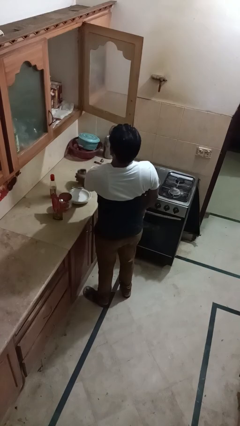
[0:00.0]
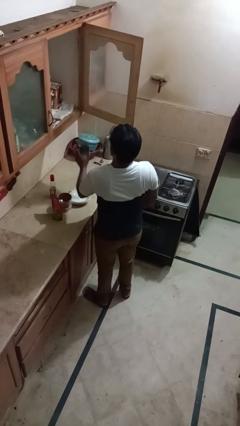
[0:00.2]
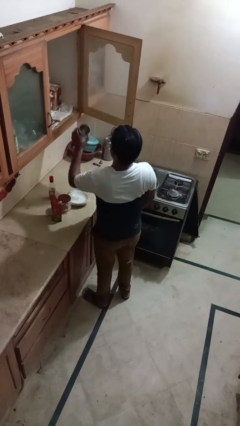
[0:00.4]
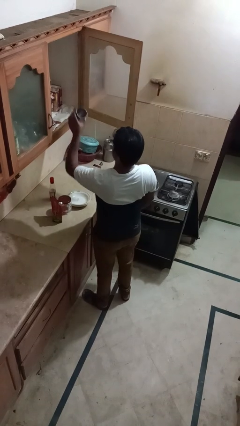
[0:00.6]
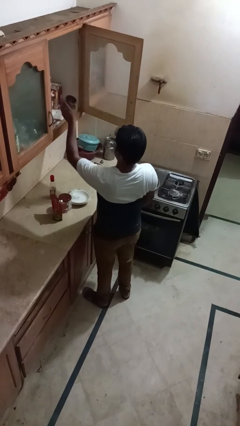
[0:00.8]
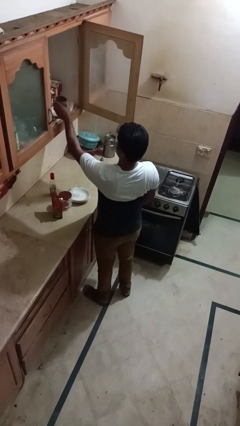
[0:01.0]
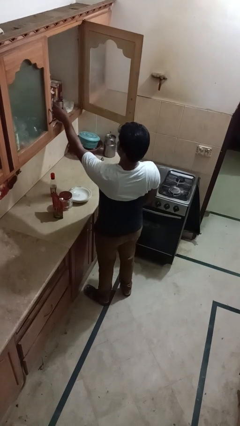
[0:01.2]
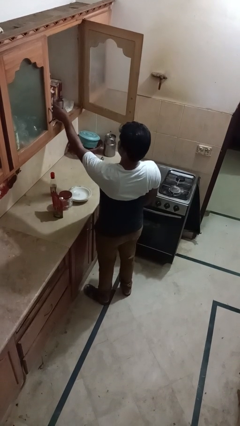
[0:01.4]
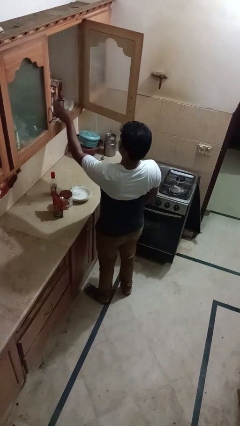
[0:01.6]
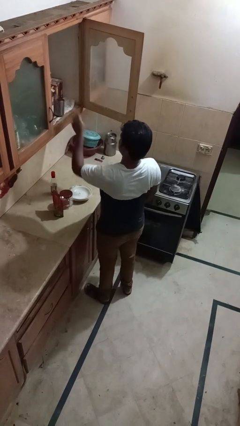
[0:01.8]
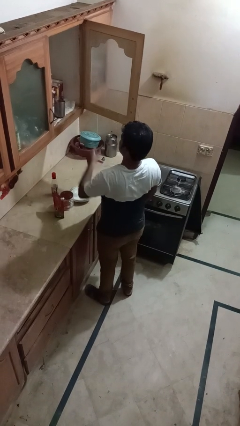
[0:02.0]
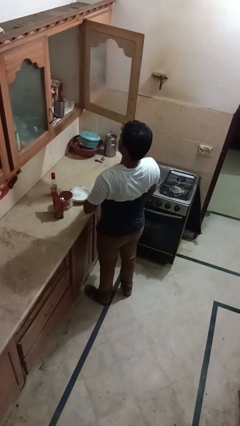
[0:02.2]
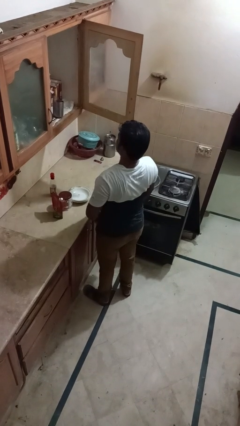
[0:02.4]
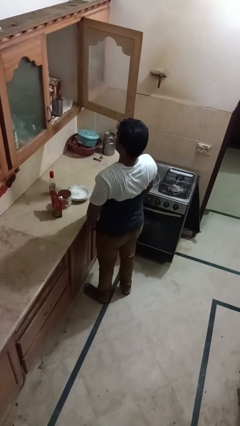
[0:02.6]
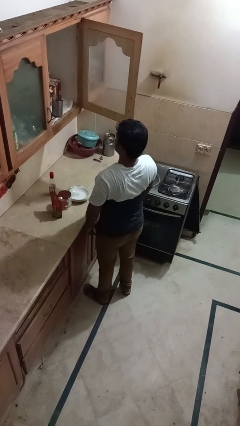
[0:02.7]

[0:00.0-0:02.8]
person puts object in cabinet

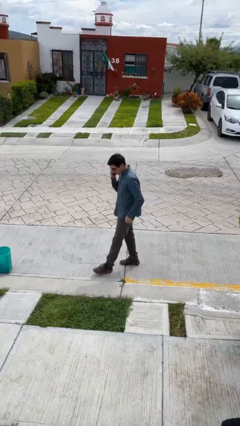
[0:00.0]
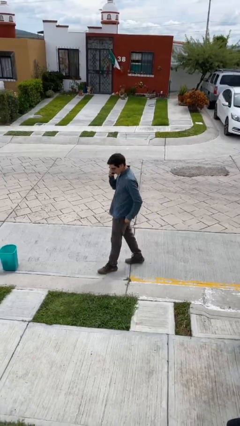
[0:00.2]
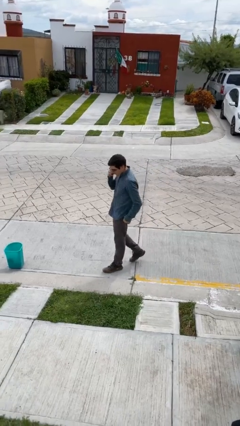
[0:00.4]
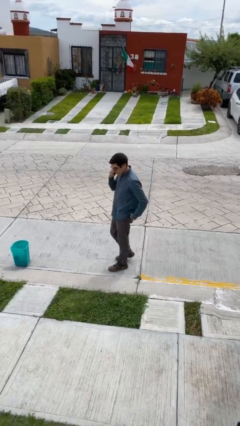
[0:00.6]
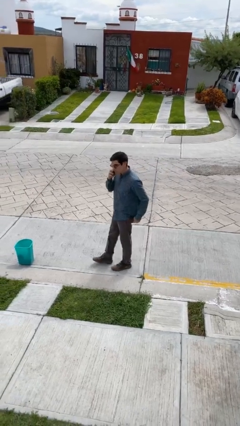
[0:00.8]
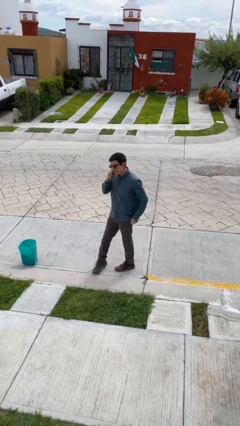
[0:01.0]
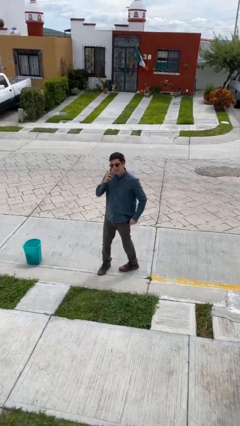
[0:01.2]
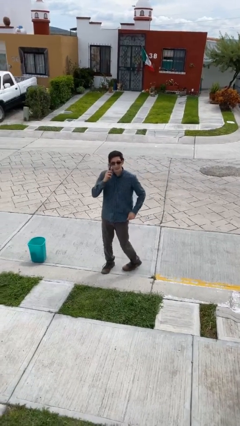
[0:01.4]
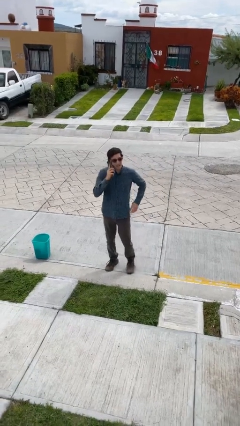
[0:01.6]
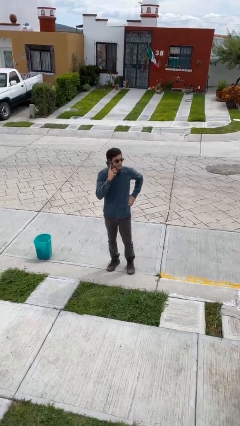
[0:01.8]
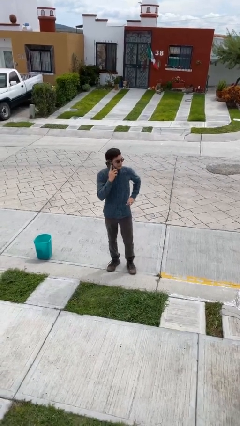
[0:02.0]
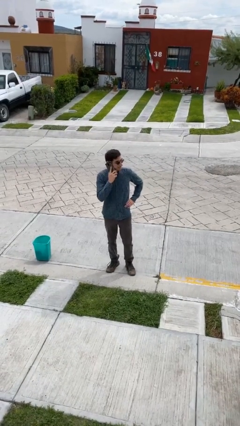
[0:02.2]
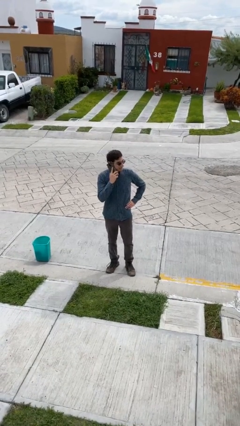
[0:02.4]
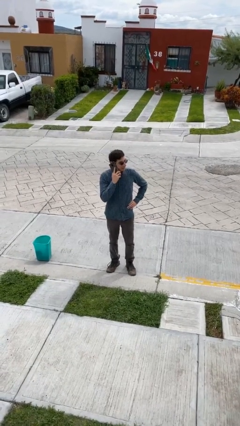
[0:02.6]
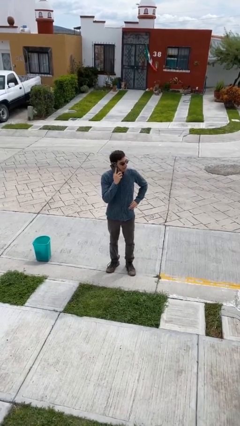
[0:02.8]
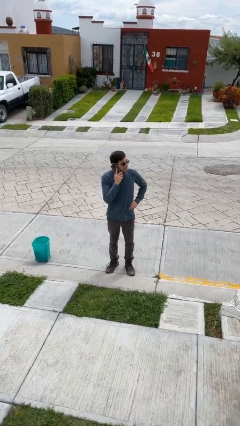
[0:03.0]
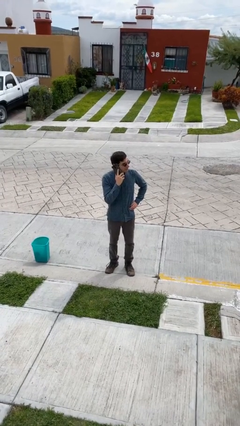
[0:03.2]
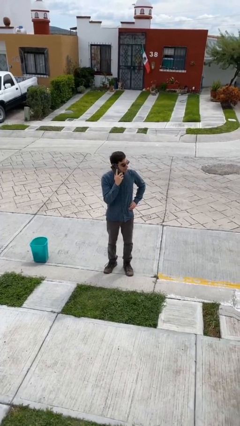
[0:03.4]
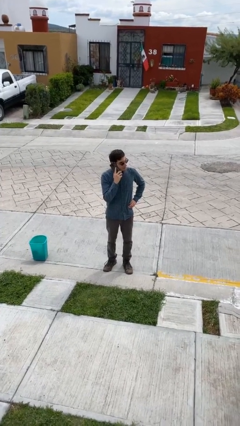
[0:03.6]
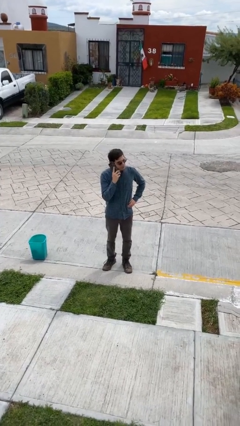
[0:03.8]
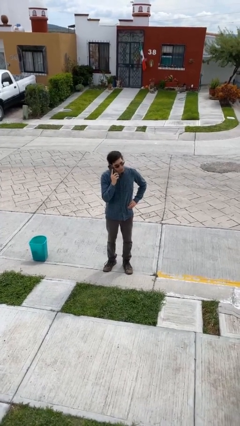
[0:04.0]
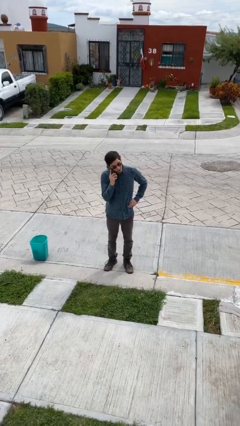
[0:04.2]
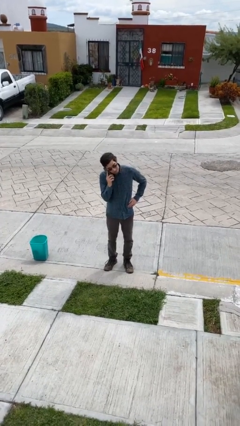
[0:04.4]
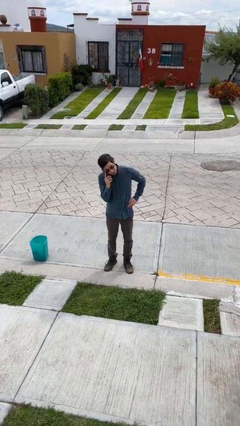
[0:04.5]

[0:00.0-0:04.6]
person talks on phone

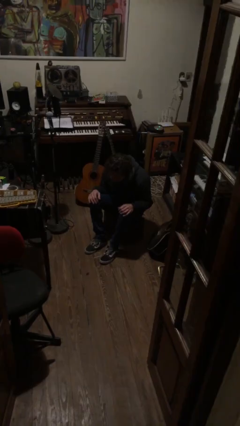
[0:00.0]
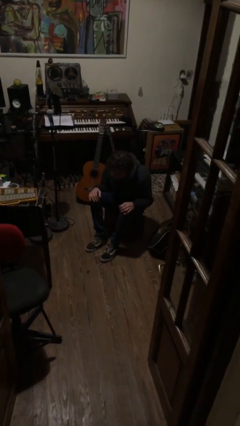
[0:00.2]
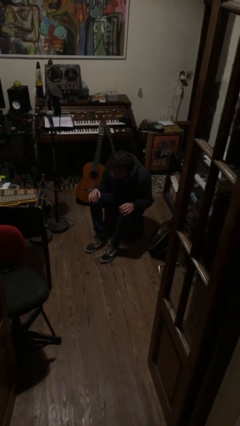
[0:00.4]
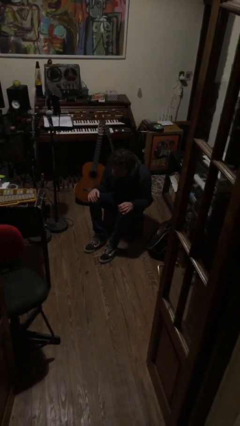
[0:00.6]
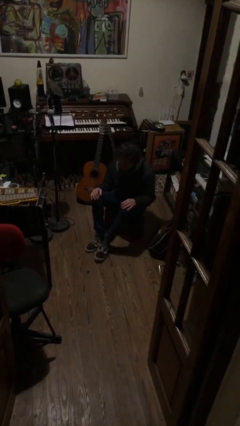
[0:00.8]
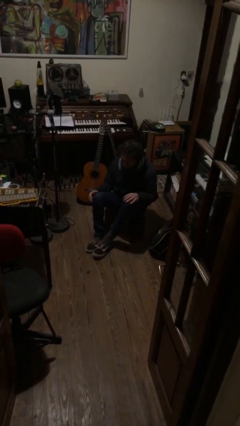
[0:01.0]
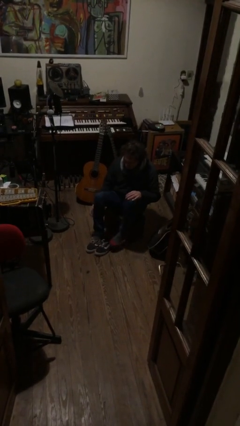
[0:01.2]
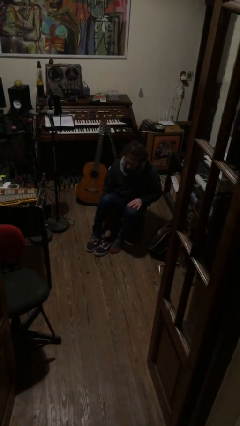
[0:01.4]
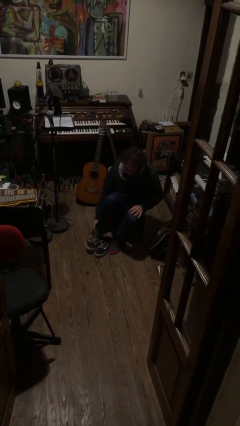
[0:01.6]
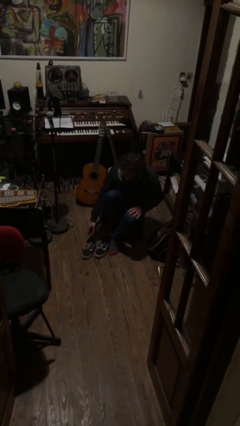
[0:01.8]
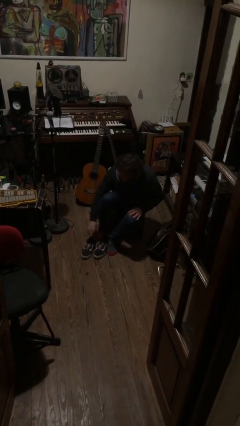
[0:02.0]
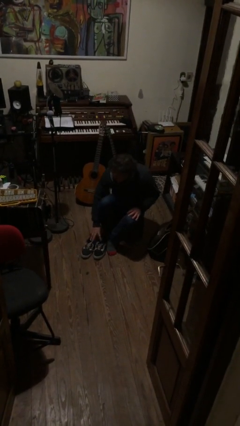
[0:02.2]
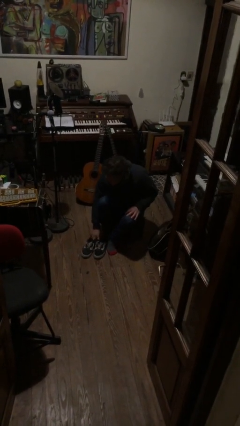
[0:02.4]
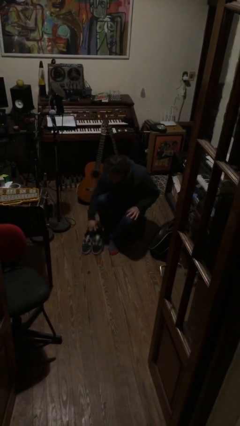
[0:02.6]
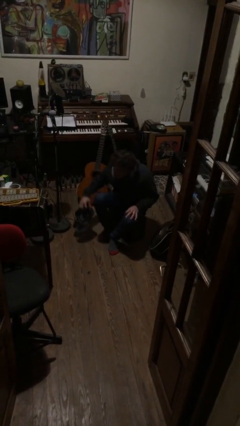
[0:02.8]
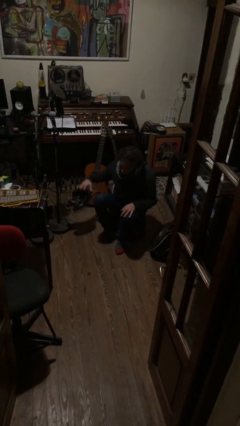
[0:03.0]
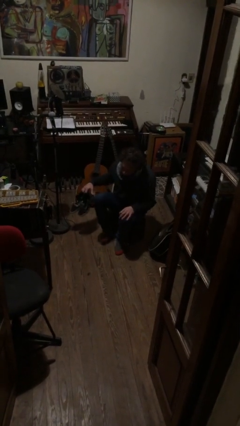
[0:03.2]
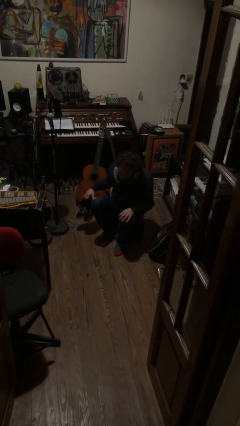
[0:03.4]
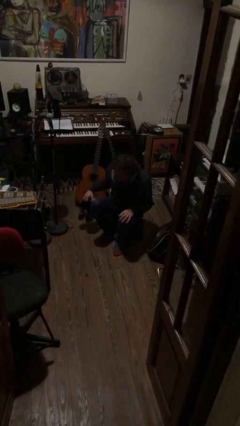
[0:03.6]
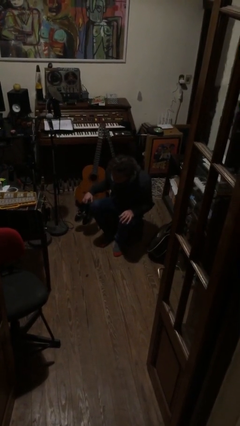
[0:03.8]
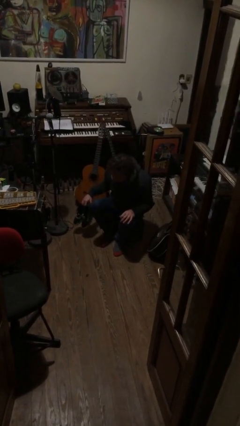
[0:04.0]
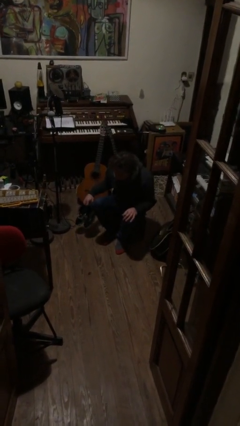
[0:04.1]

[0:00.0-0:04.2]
person takes off shoes

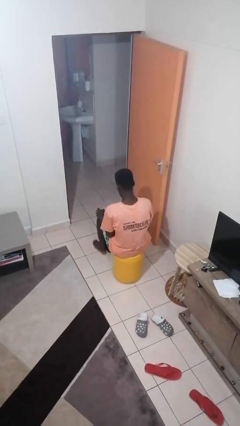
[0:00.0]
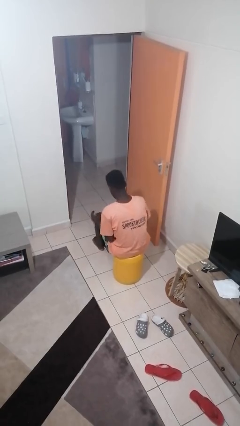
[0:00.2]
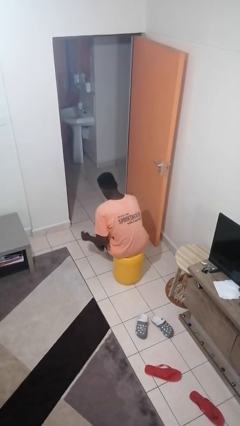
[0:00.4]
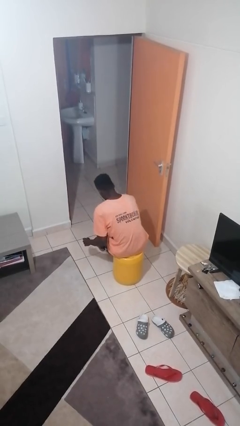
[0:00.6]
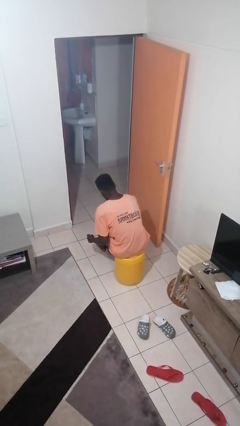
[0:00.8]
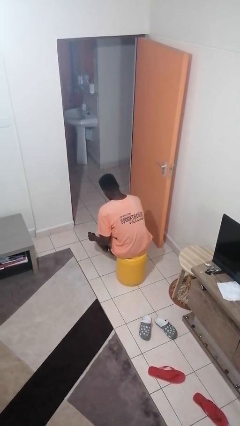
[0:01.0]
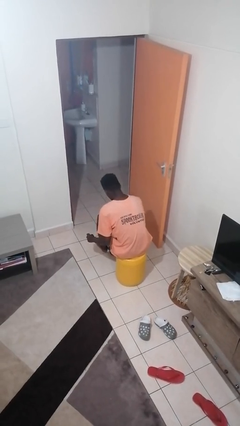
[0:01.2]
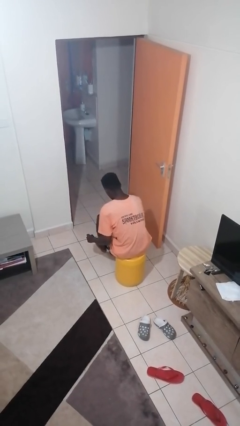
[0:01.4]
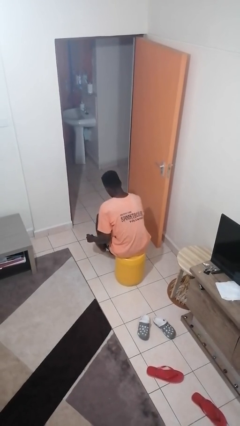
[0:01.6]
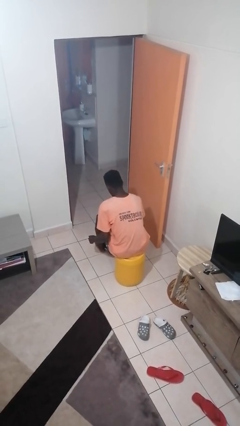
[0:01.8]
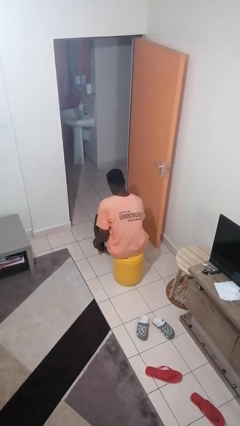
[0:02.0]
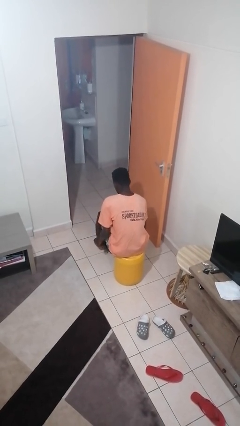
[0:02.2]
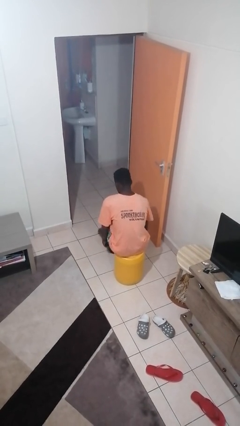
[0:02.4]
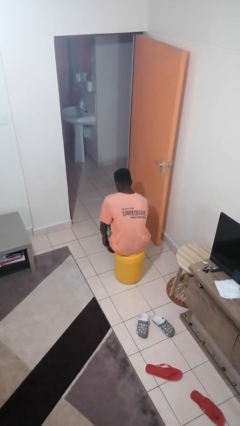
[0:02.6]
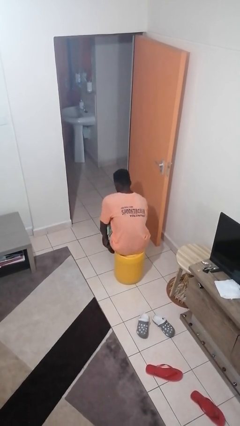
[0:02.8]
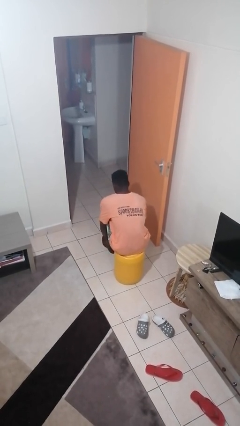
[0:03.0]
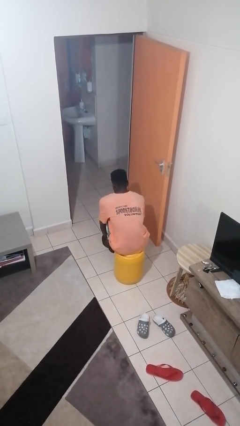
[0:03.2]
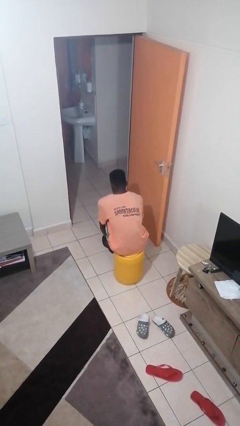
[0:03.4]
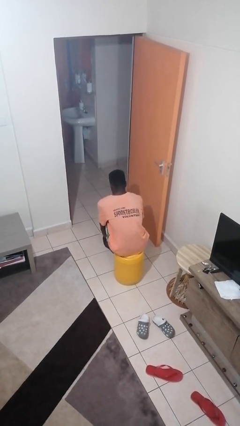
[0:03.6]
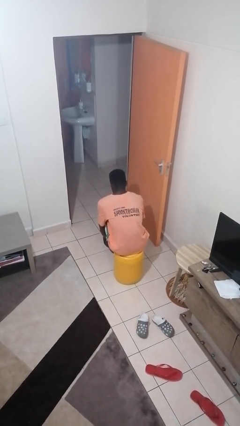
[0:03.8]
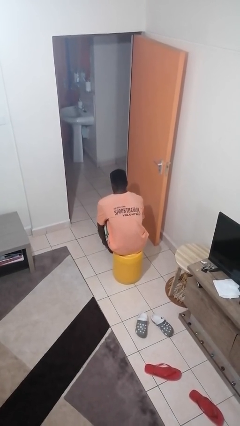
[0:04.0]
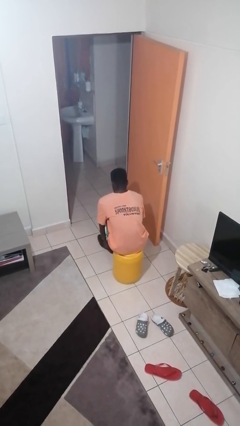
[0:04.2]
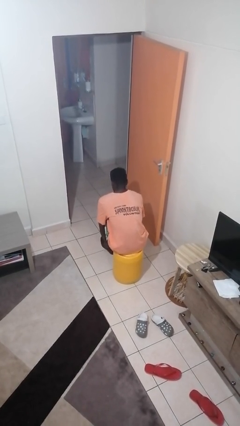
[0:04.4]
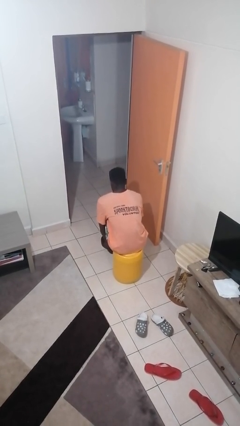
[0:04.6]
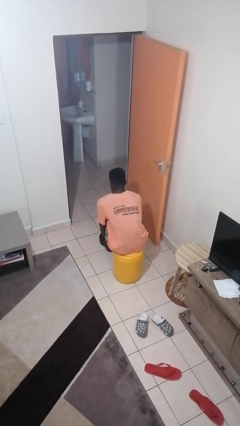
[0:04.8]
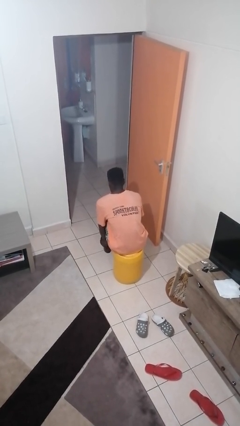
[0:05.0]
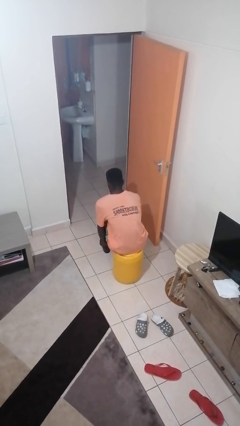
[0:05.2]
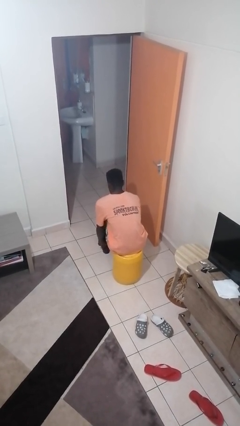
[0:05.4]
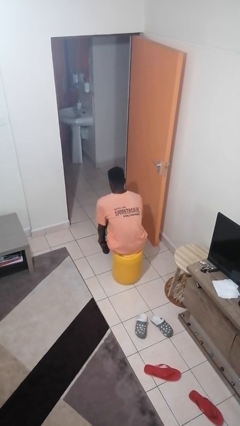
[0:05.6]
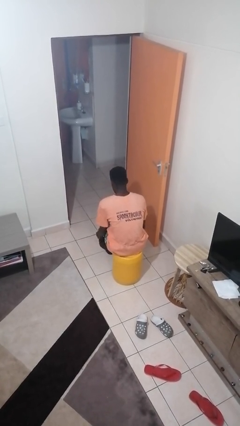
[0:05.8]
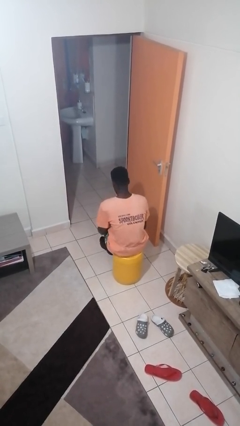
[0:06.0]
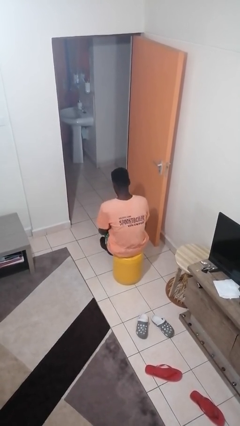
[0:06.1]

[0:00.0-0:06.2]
person puts on shoes

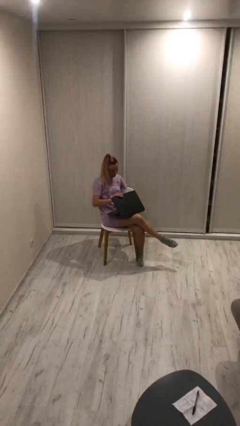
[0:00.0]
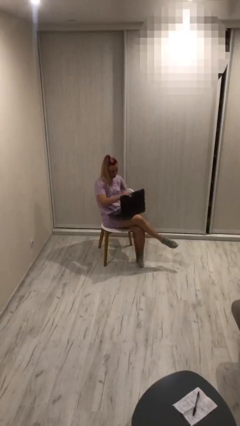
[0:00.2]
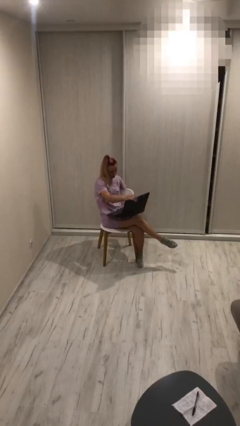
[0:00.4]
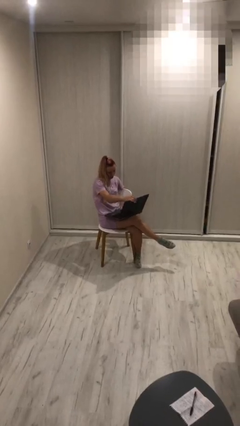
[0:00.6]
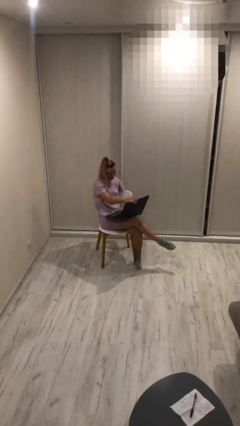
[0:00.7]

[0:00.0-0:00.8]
person opens laptop
